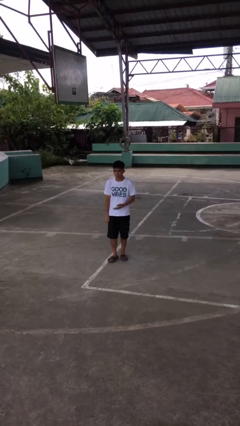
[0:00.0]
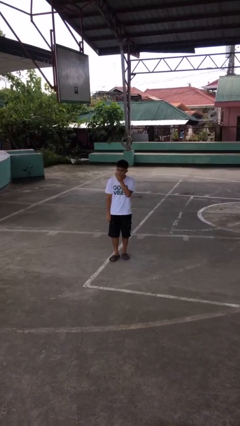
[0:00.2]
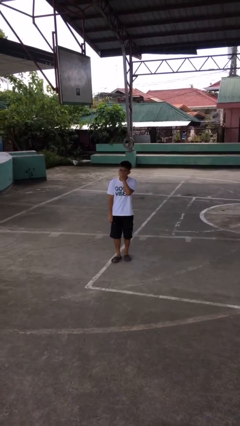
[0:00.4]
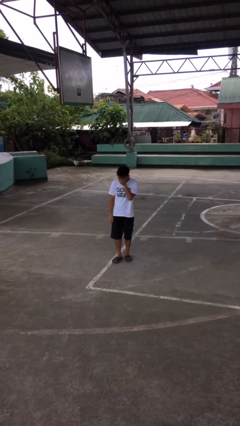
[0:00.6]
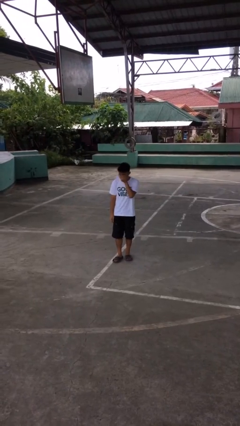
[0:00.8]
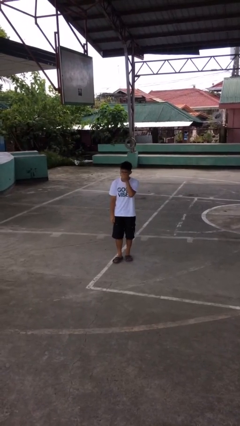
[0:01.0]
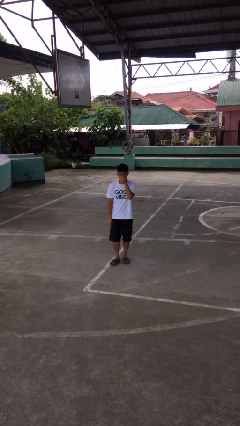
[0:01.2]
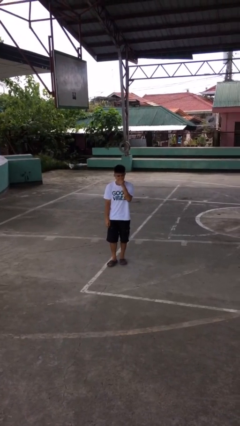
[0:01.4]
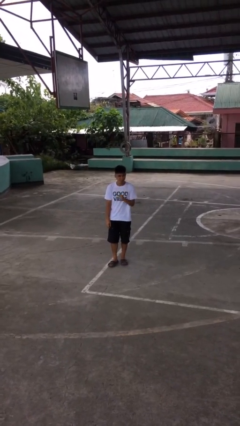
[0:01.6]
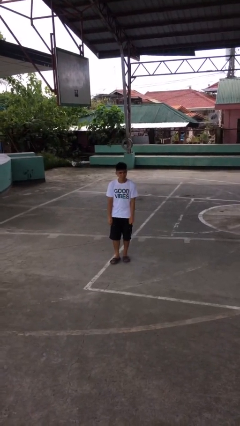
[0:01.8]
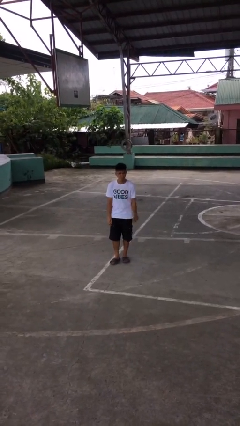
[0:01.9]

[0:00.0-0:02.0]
person sneezes into hand

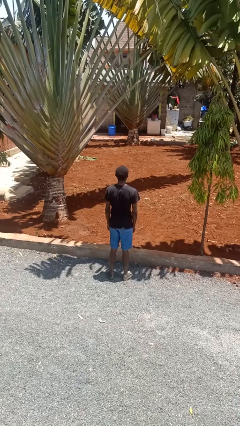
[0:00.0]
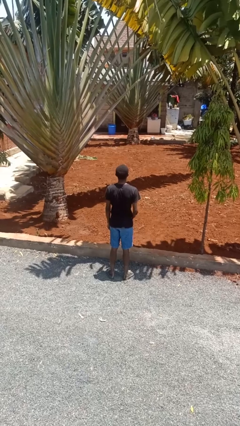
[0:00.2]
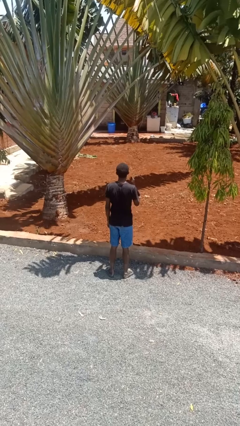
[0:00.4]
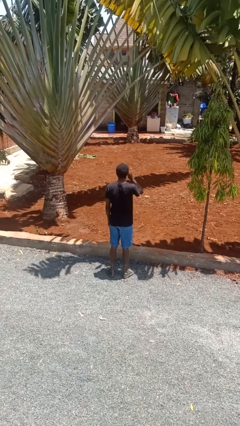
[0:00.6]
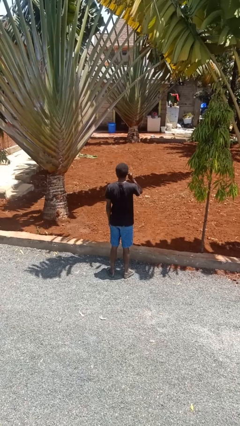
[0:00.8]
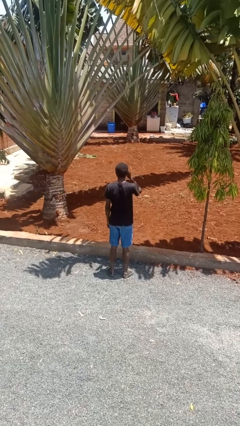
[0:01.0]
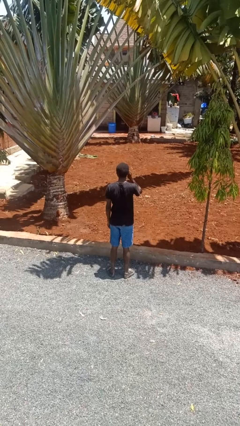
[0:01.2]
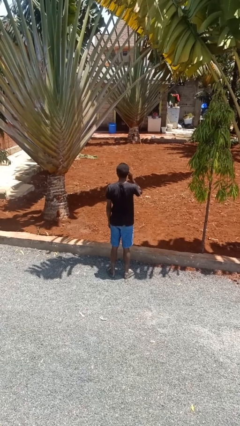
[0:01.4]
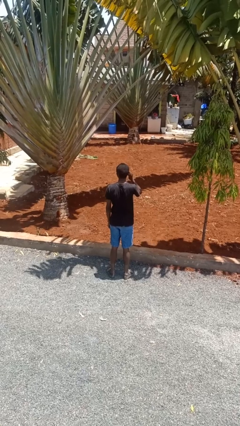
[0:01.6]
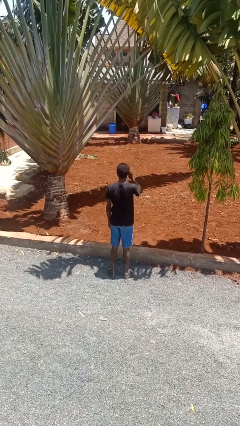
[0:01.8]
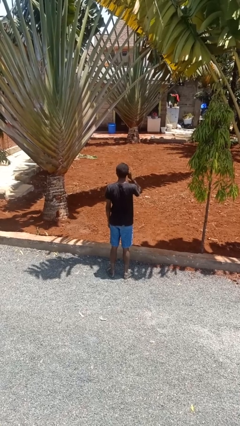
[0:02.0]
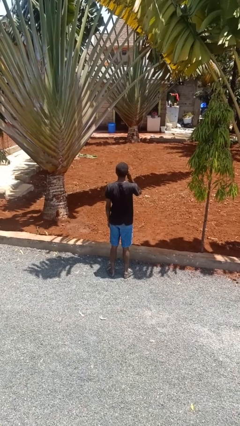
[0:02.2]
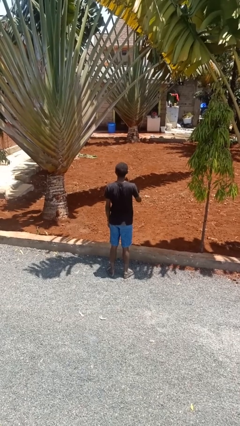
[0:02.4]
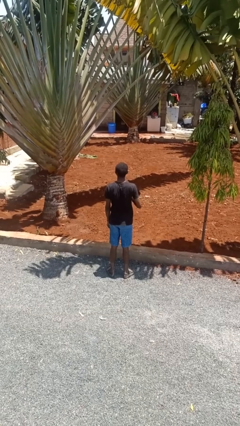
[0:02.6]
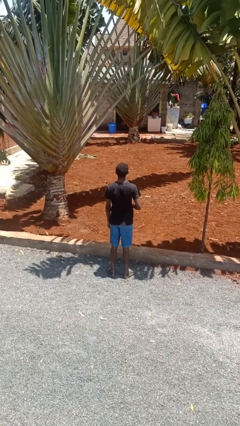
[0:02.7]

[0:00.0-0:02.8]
person touches earlobe

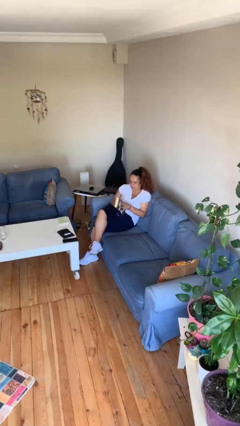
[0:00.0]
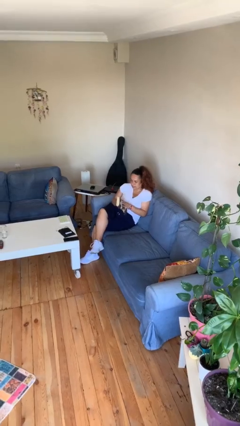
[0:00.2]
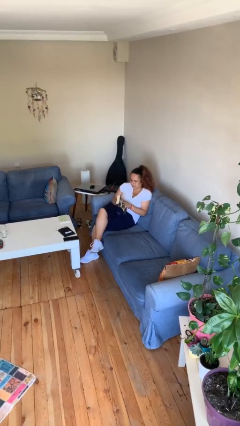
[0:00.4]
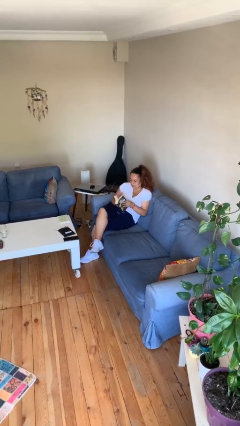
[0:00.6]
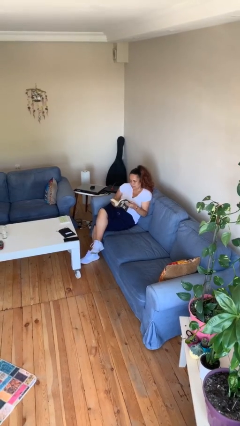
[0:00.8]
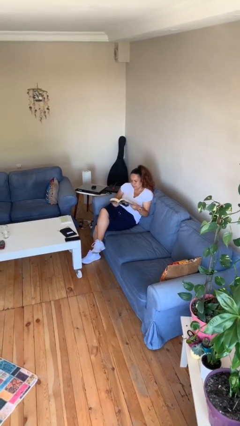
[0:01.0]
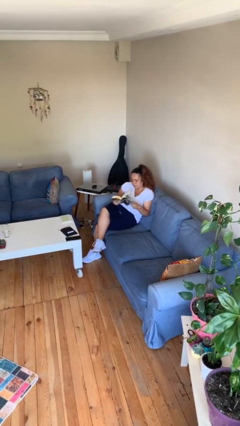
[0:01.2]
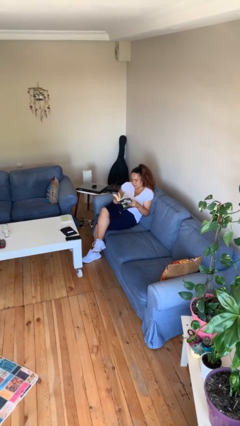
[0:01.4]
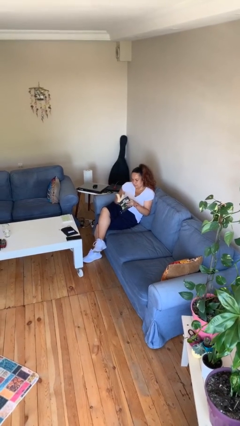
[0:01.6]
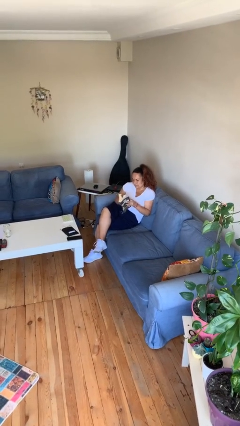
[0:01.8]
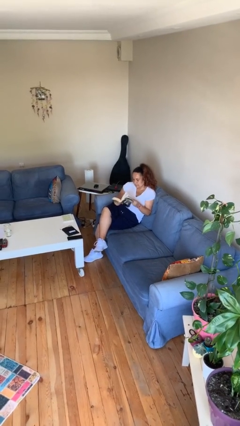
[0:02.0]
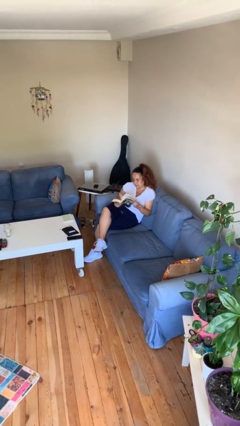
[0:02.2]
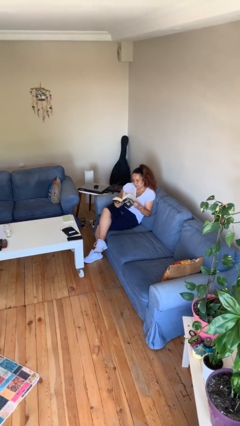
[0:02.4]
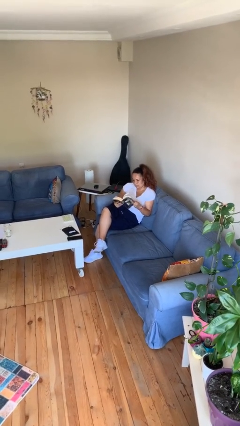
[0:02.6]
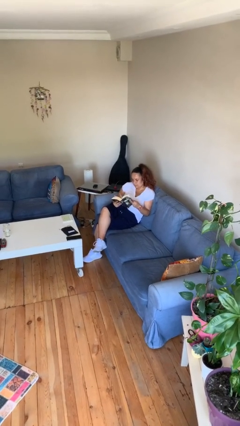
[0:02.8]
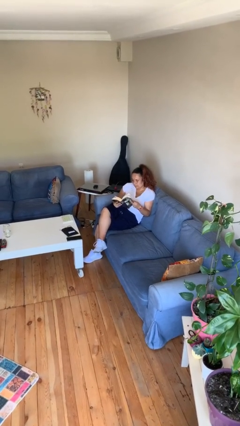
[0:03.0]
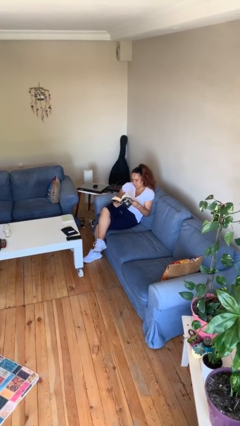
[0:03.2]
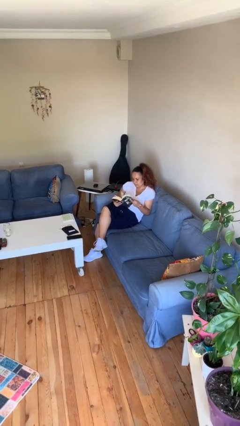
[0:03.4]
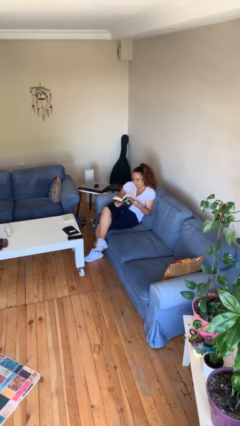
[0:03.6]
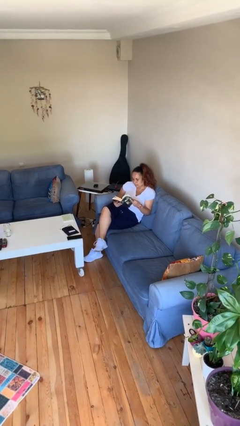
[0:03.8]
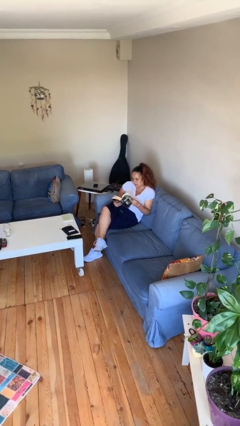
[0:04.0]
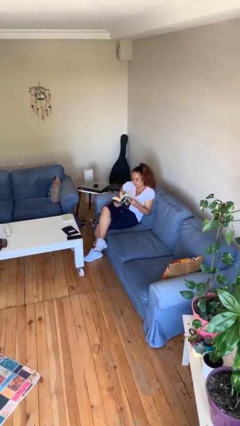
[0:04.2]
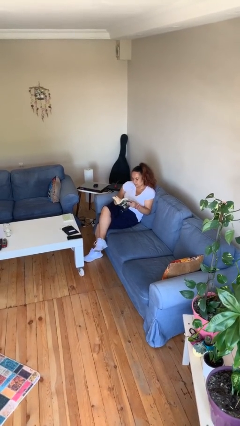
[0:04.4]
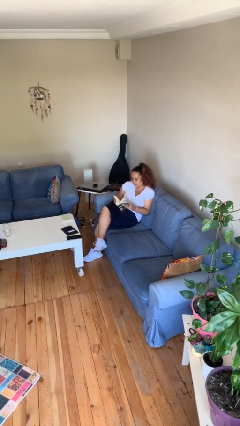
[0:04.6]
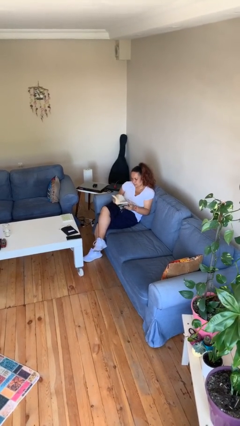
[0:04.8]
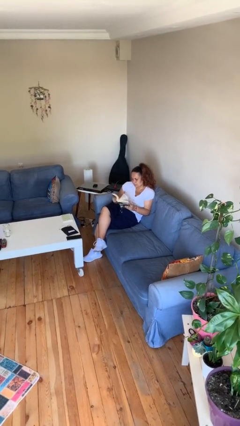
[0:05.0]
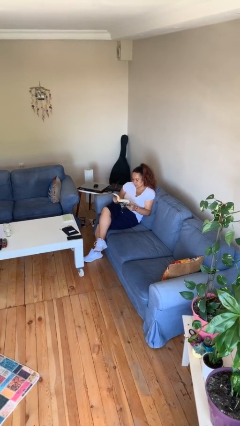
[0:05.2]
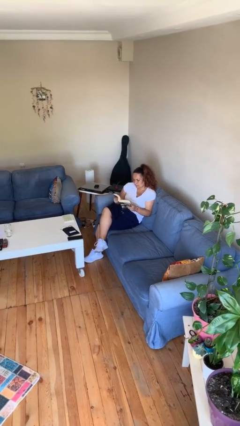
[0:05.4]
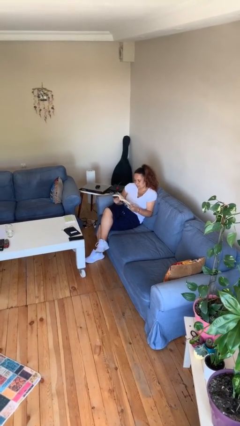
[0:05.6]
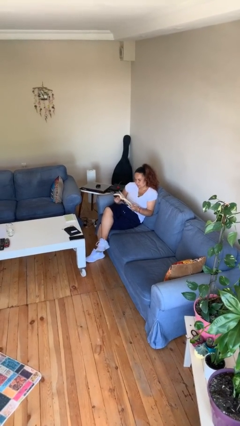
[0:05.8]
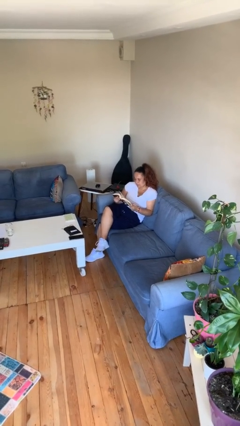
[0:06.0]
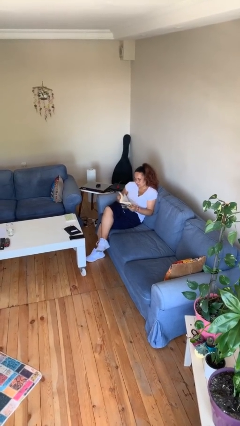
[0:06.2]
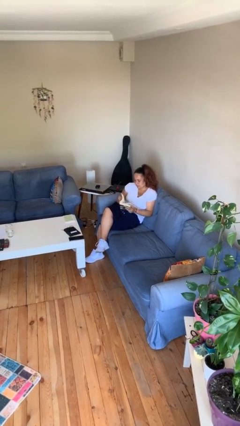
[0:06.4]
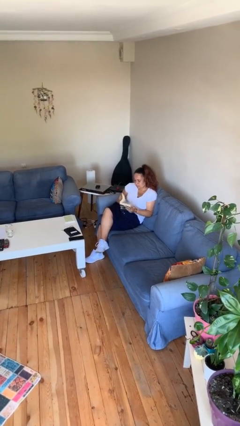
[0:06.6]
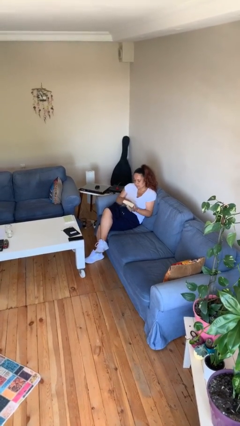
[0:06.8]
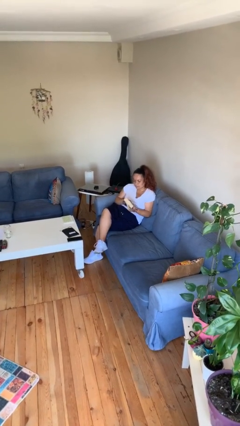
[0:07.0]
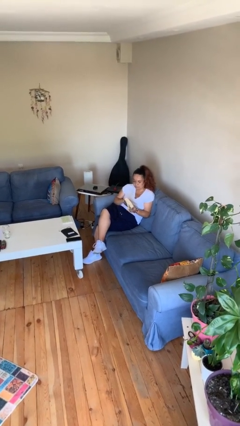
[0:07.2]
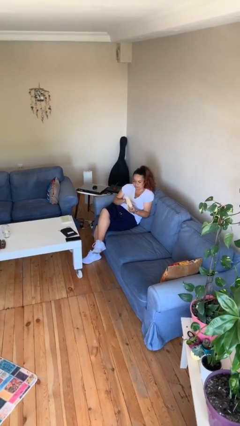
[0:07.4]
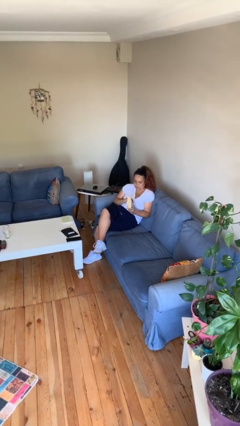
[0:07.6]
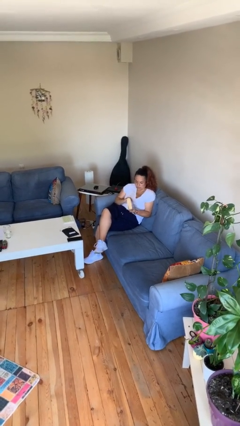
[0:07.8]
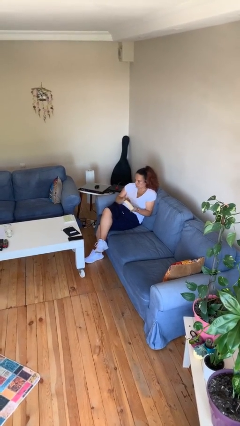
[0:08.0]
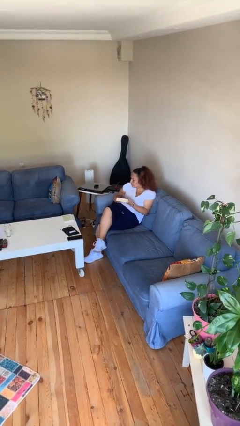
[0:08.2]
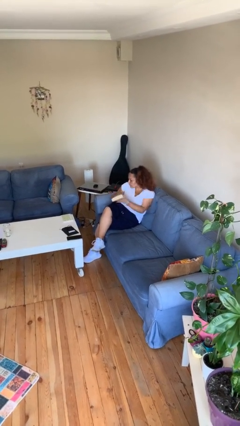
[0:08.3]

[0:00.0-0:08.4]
person reads document

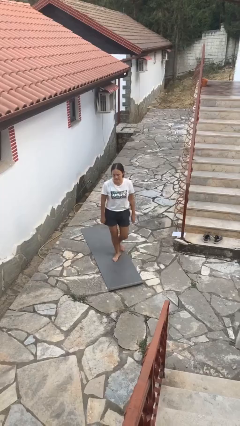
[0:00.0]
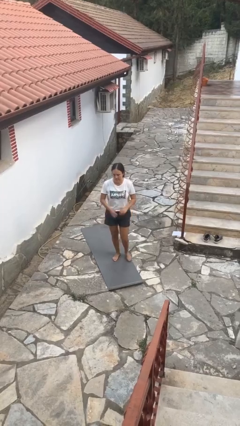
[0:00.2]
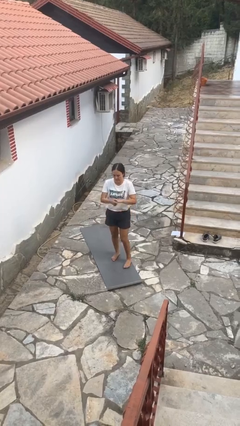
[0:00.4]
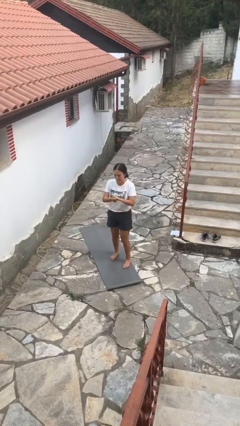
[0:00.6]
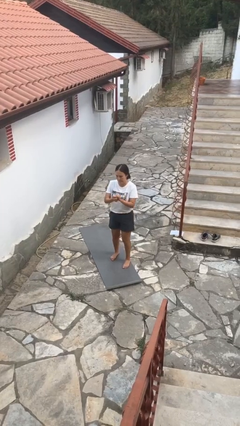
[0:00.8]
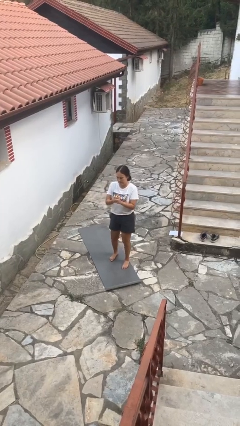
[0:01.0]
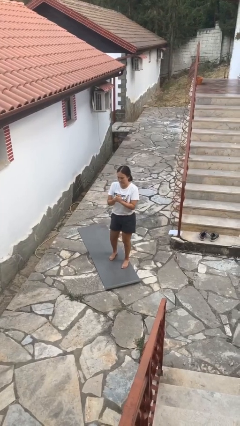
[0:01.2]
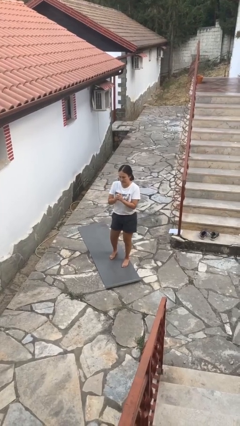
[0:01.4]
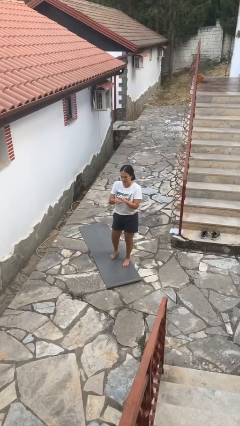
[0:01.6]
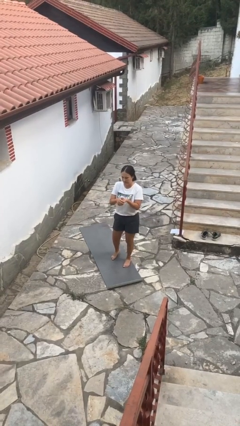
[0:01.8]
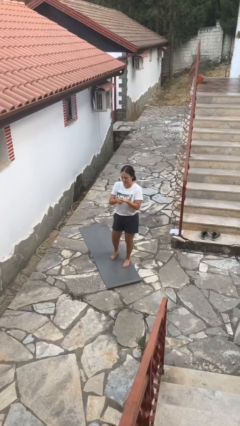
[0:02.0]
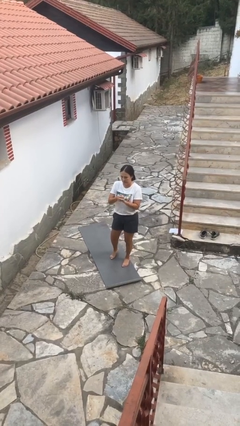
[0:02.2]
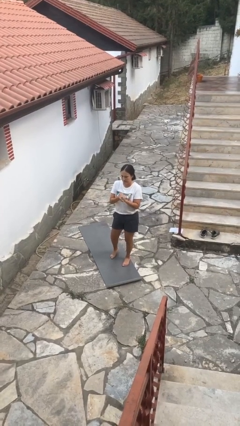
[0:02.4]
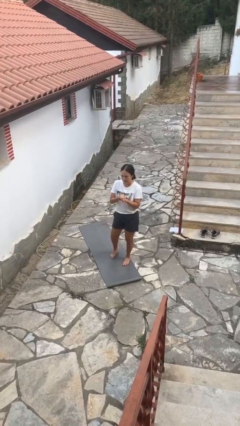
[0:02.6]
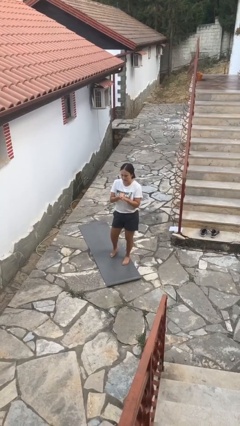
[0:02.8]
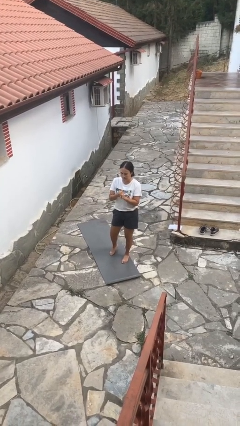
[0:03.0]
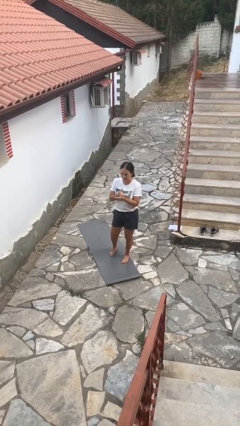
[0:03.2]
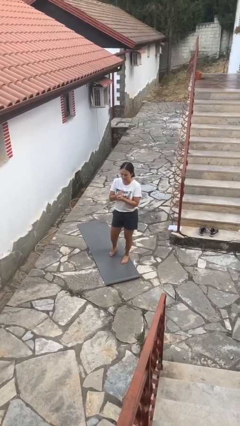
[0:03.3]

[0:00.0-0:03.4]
person cracks knuckles

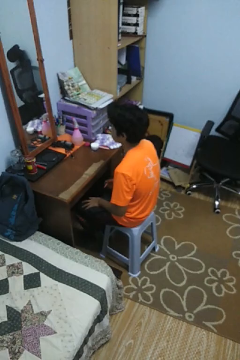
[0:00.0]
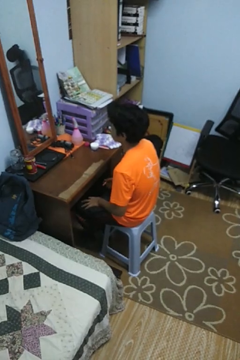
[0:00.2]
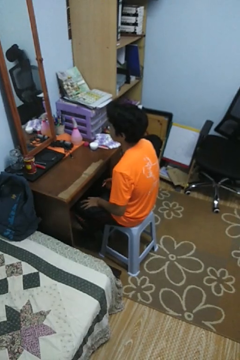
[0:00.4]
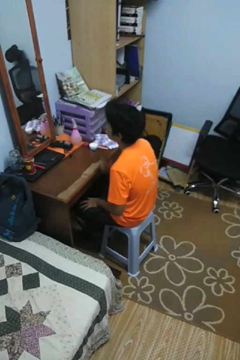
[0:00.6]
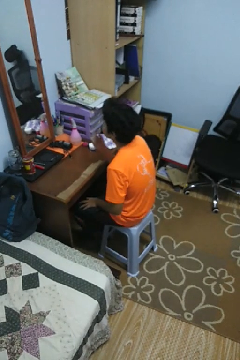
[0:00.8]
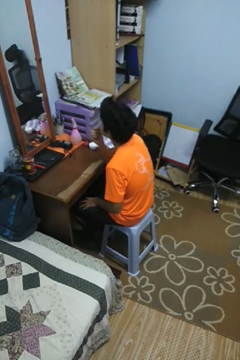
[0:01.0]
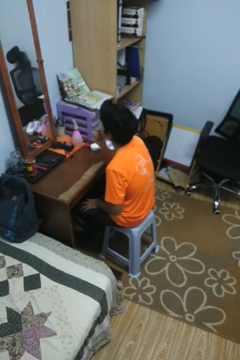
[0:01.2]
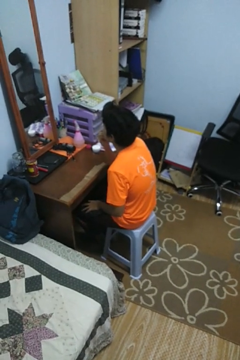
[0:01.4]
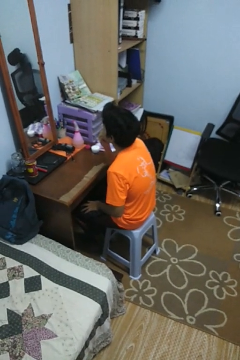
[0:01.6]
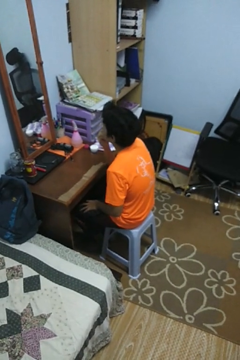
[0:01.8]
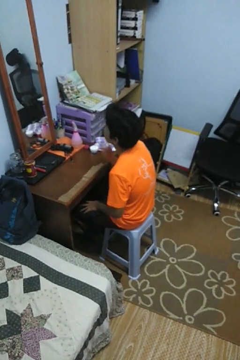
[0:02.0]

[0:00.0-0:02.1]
person applies lip makeup
